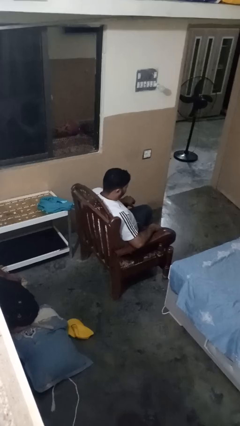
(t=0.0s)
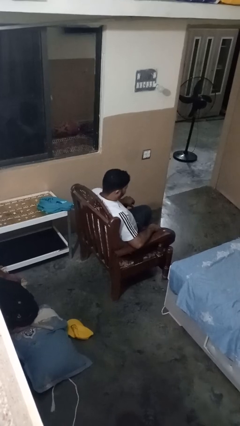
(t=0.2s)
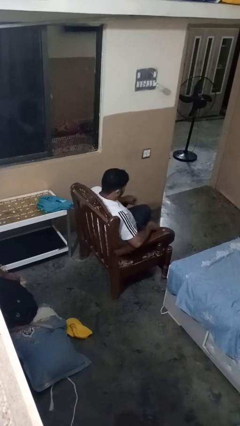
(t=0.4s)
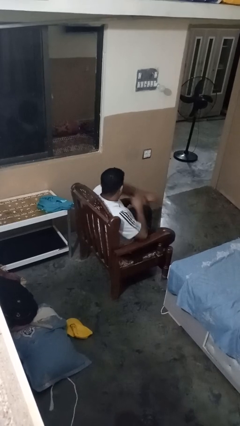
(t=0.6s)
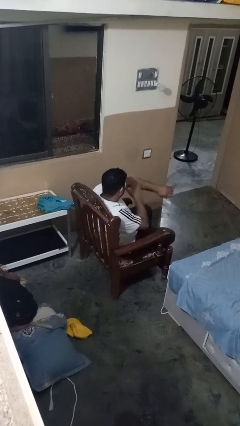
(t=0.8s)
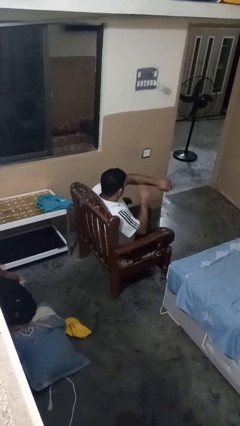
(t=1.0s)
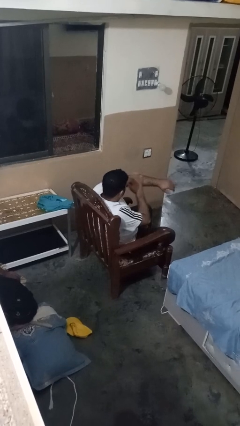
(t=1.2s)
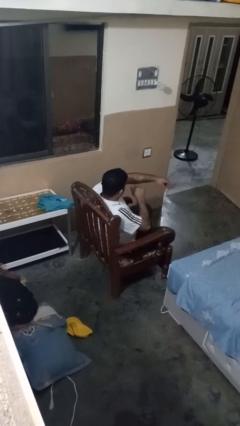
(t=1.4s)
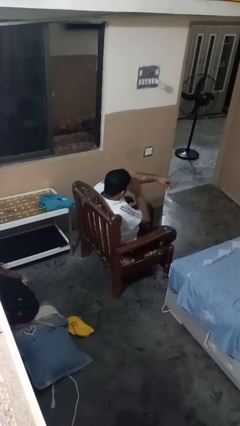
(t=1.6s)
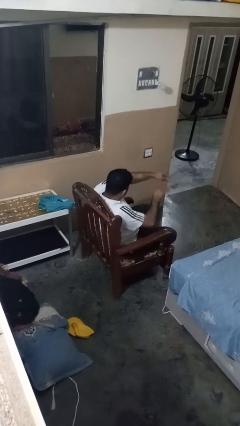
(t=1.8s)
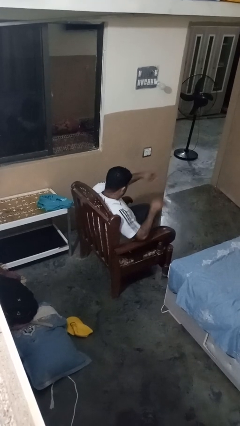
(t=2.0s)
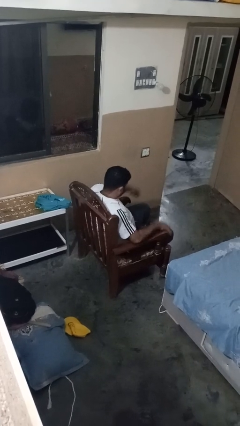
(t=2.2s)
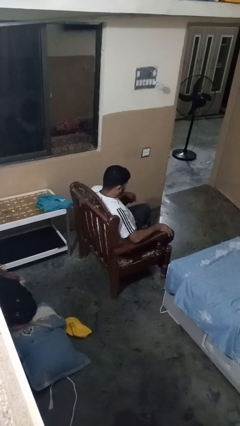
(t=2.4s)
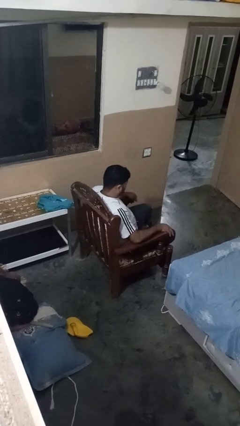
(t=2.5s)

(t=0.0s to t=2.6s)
person swats bug

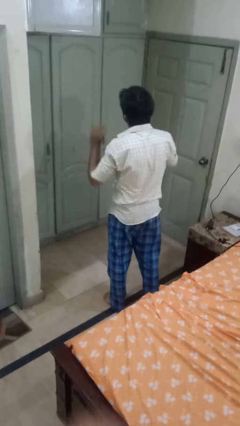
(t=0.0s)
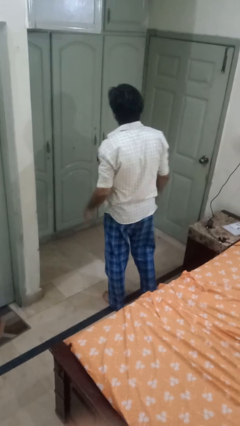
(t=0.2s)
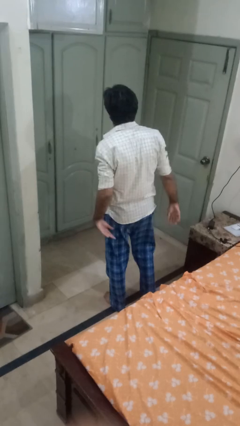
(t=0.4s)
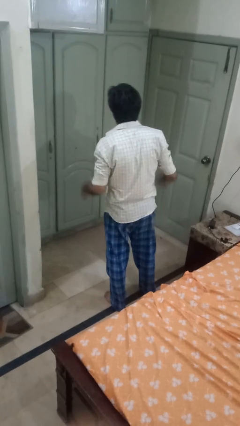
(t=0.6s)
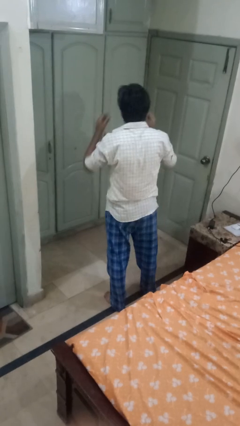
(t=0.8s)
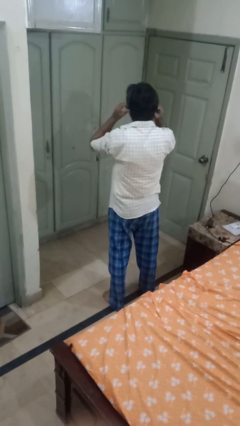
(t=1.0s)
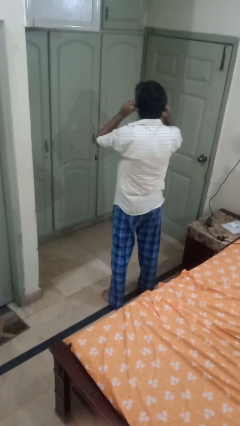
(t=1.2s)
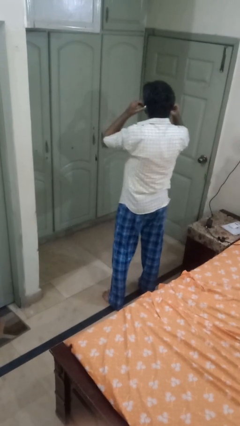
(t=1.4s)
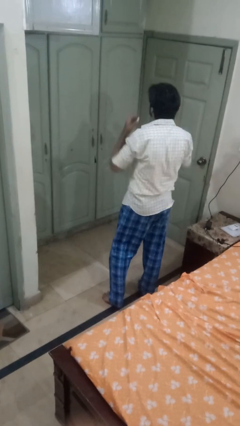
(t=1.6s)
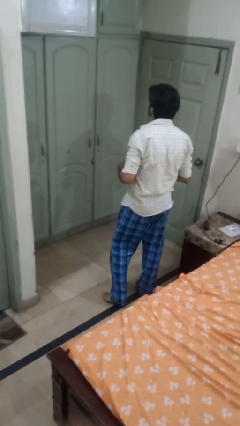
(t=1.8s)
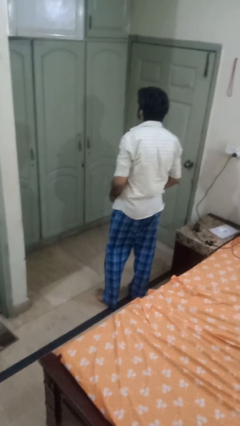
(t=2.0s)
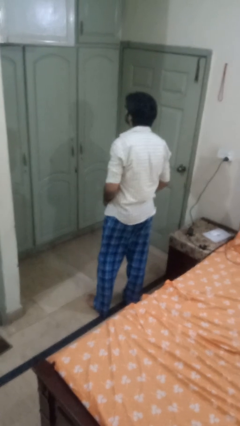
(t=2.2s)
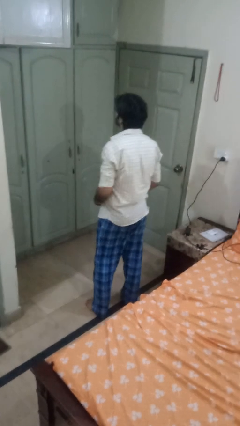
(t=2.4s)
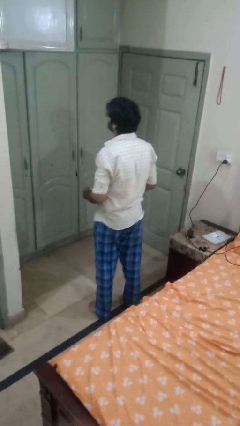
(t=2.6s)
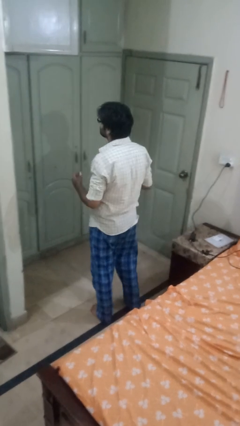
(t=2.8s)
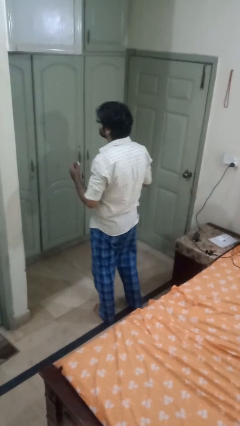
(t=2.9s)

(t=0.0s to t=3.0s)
person takes off headphones

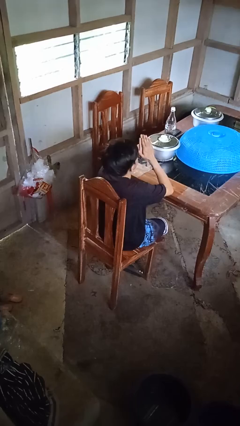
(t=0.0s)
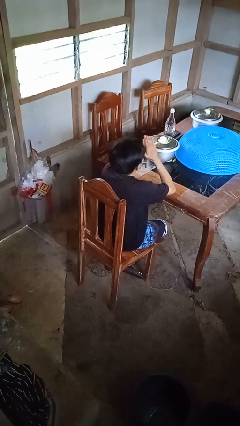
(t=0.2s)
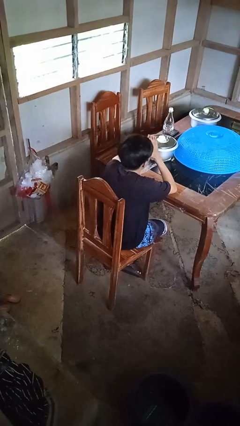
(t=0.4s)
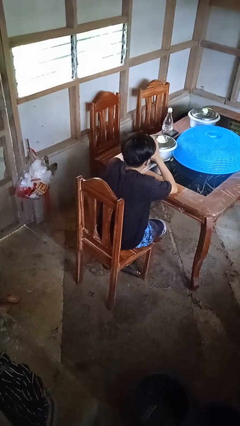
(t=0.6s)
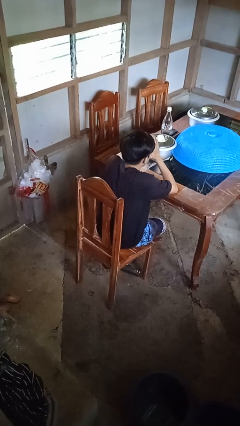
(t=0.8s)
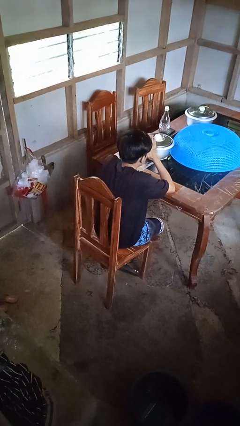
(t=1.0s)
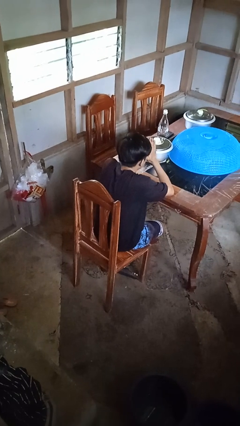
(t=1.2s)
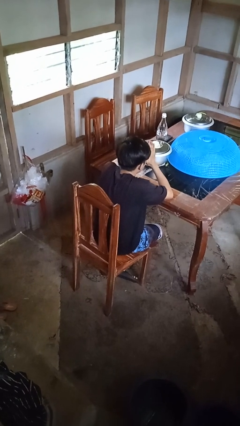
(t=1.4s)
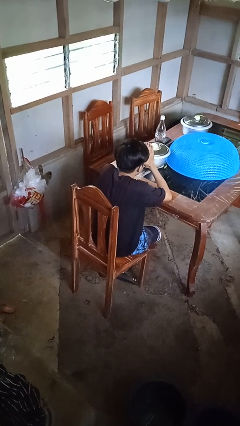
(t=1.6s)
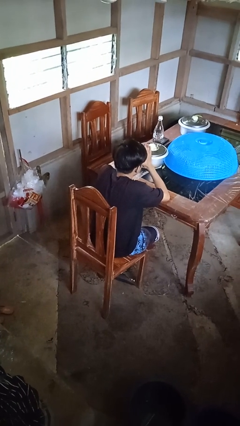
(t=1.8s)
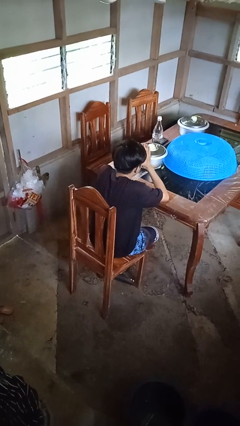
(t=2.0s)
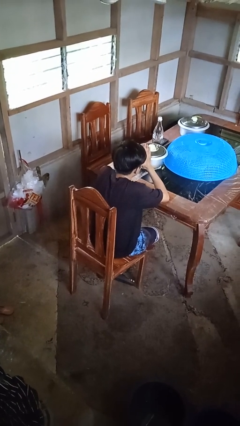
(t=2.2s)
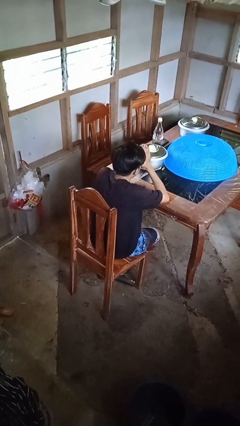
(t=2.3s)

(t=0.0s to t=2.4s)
person prays

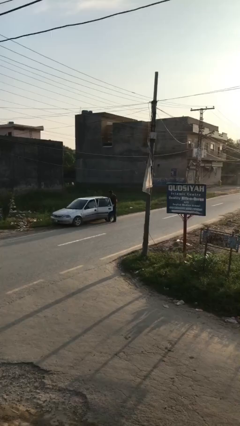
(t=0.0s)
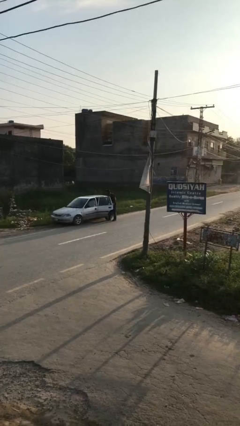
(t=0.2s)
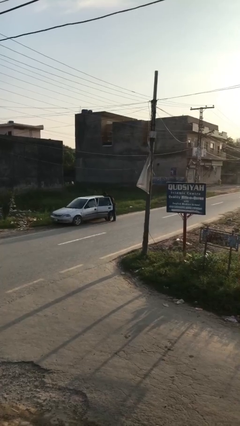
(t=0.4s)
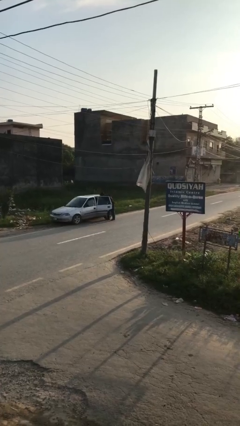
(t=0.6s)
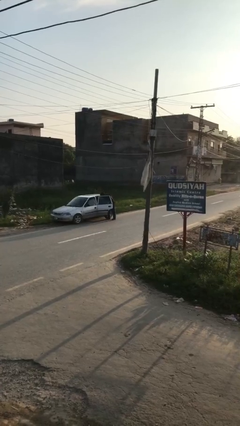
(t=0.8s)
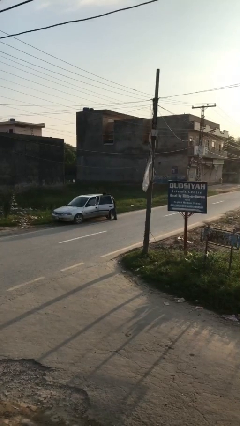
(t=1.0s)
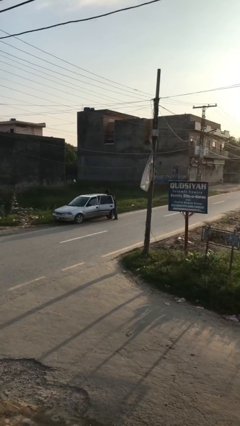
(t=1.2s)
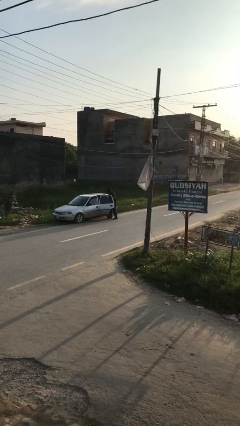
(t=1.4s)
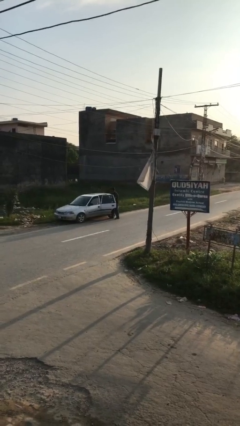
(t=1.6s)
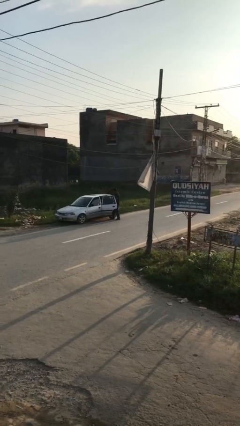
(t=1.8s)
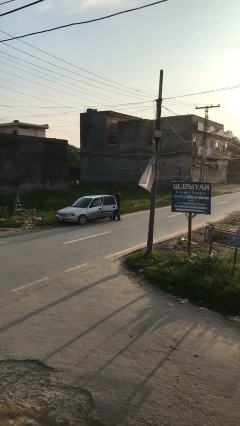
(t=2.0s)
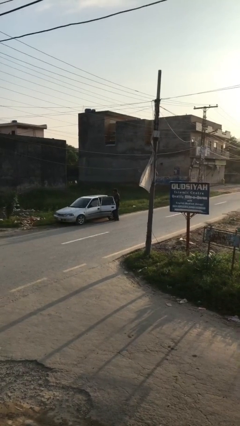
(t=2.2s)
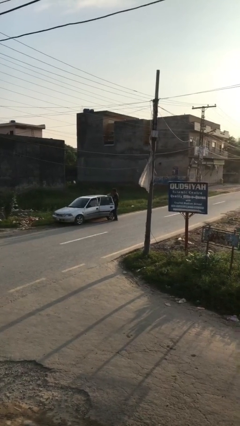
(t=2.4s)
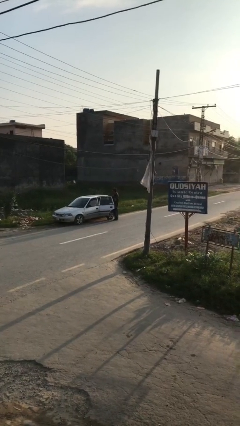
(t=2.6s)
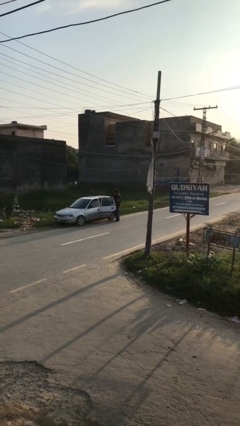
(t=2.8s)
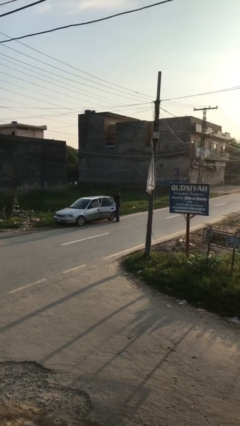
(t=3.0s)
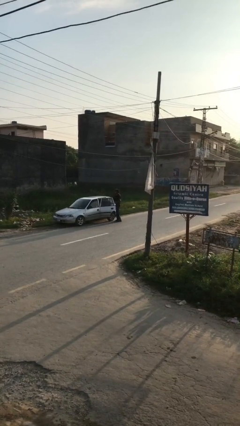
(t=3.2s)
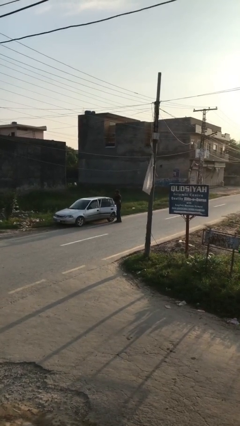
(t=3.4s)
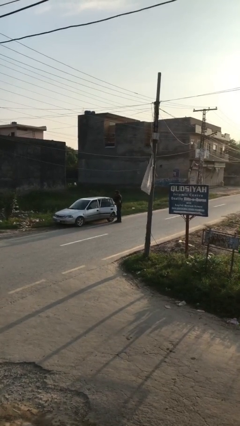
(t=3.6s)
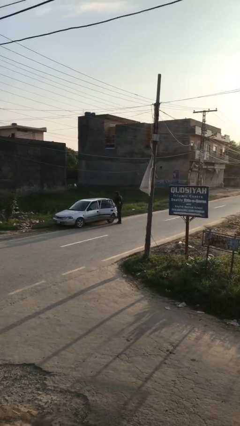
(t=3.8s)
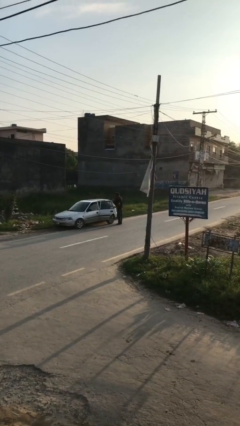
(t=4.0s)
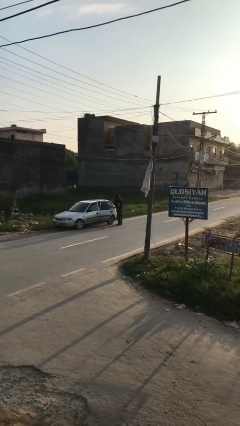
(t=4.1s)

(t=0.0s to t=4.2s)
person unloads car

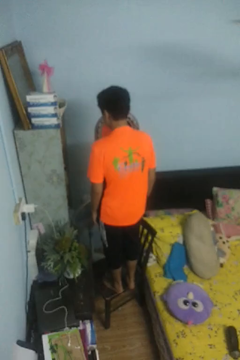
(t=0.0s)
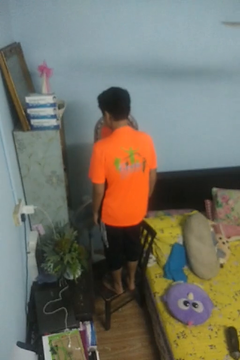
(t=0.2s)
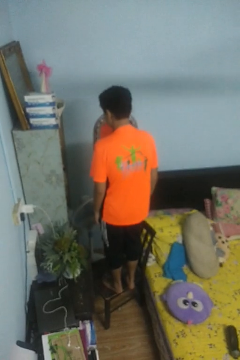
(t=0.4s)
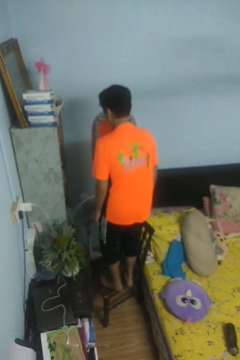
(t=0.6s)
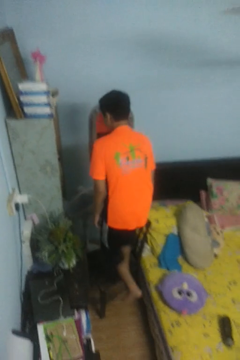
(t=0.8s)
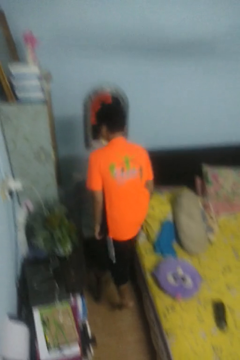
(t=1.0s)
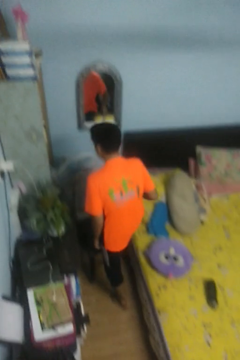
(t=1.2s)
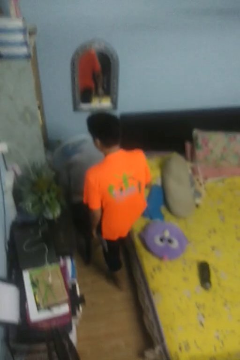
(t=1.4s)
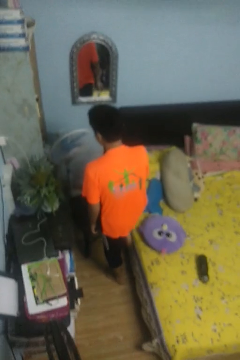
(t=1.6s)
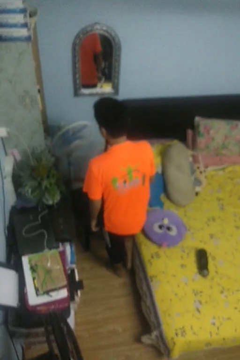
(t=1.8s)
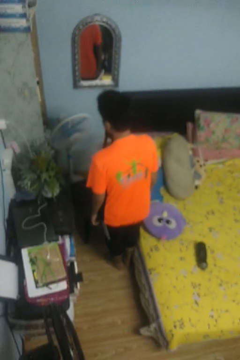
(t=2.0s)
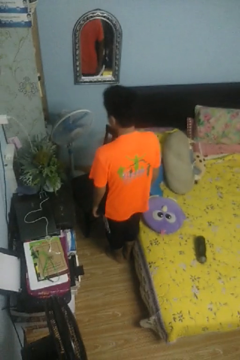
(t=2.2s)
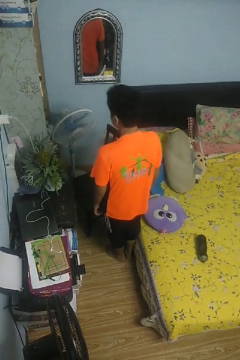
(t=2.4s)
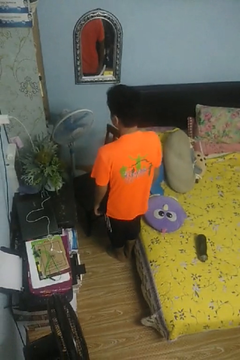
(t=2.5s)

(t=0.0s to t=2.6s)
person climbs off chair

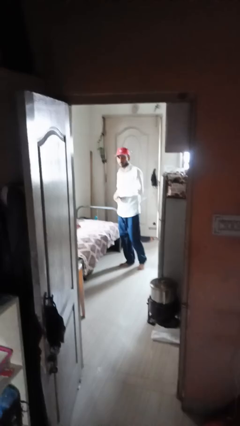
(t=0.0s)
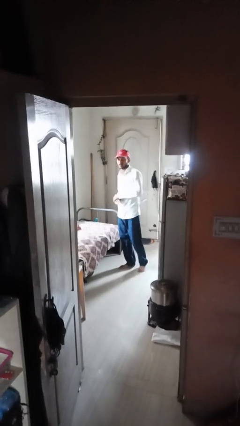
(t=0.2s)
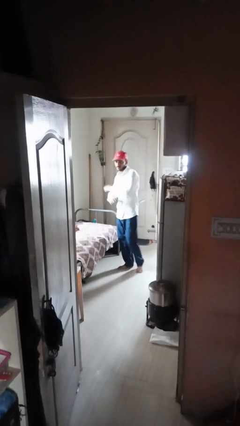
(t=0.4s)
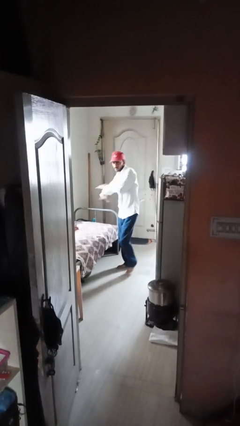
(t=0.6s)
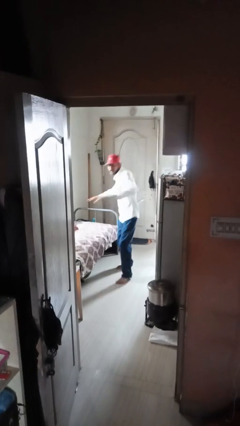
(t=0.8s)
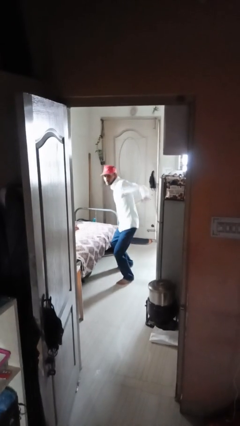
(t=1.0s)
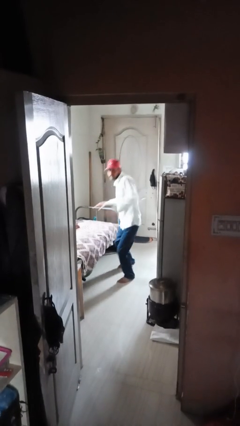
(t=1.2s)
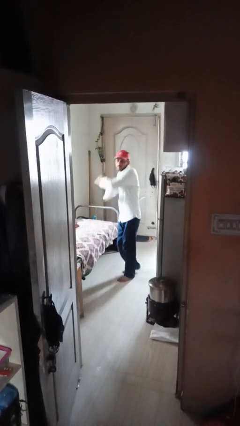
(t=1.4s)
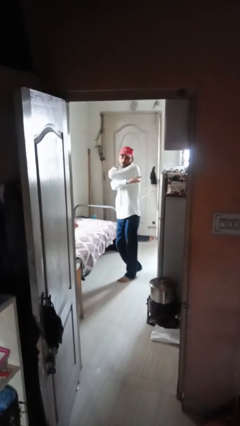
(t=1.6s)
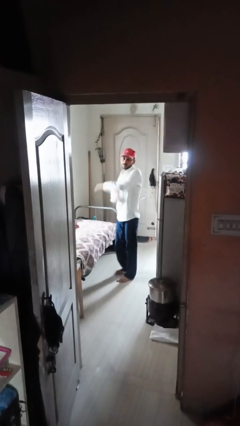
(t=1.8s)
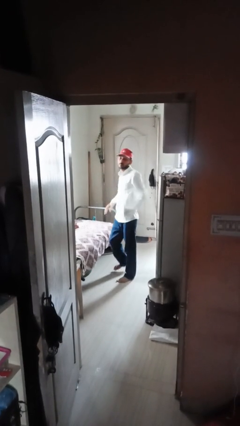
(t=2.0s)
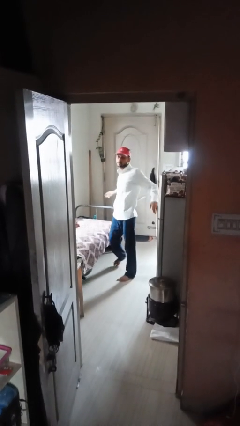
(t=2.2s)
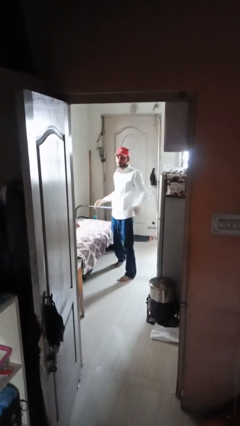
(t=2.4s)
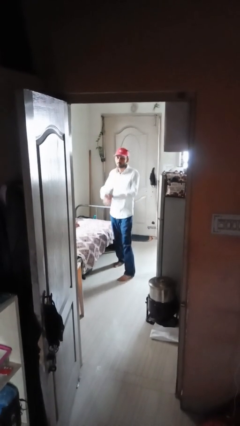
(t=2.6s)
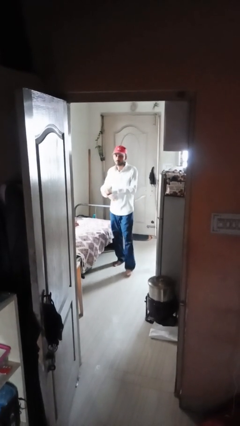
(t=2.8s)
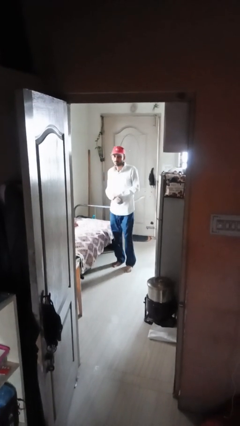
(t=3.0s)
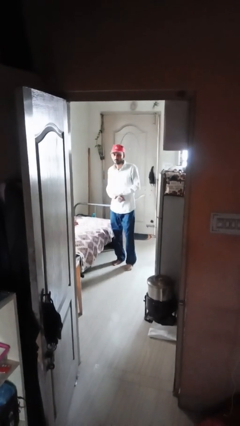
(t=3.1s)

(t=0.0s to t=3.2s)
person karate chop
